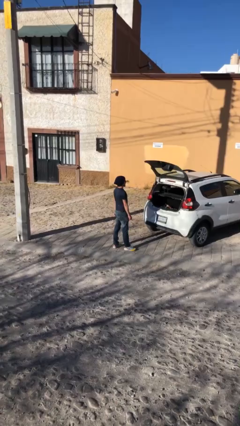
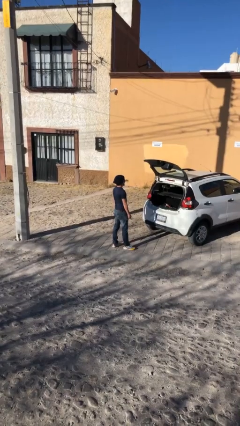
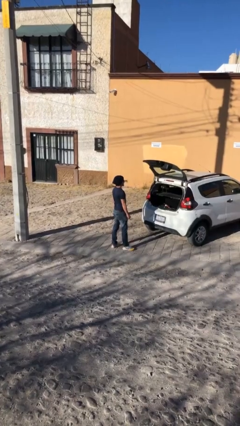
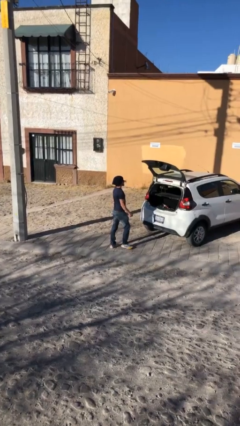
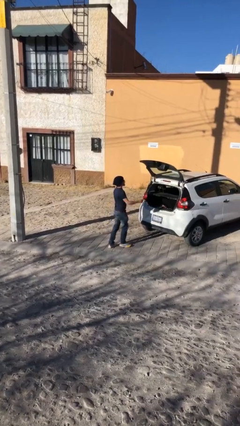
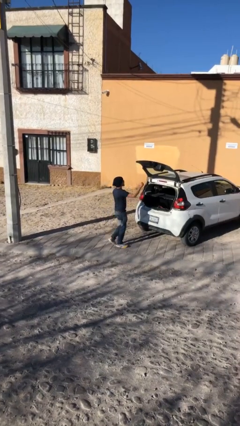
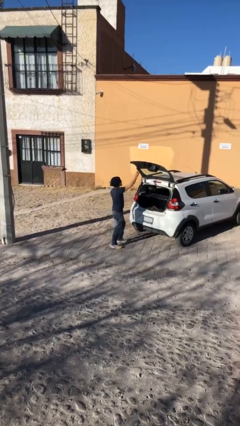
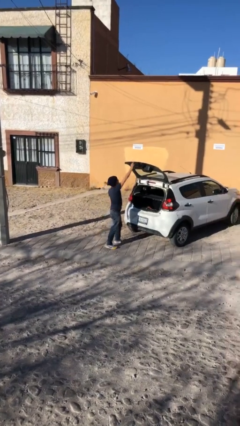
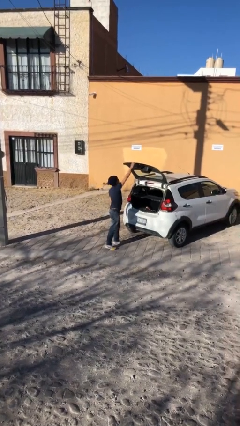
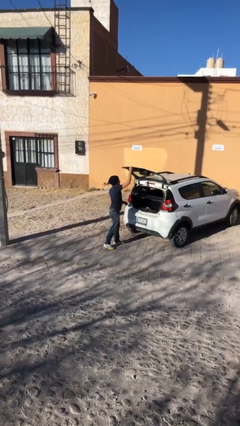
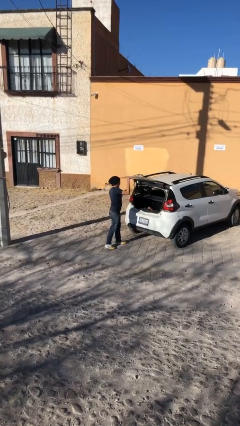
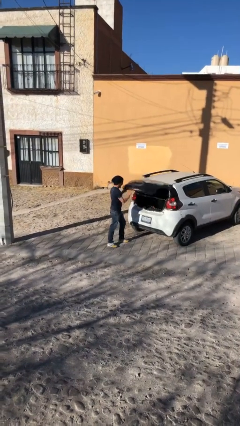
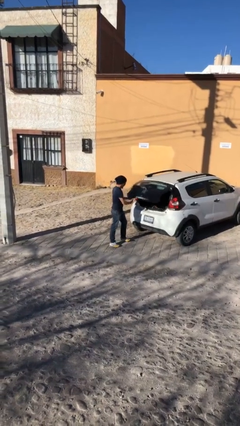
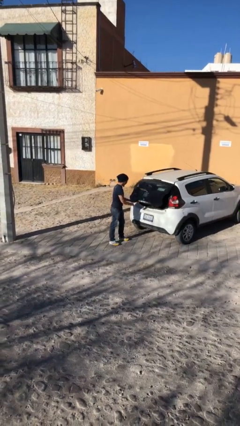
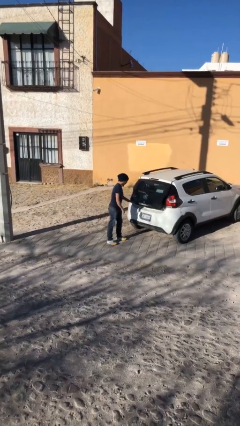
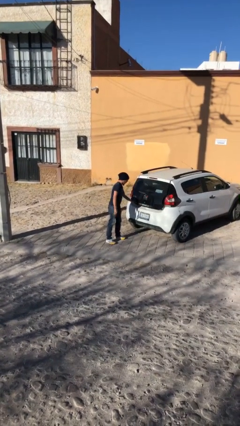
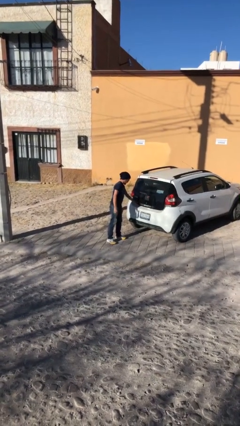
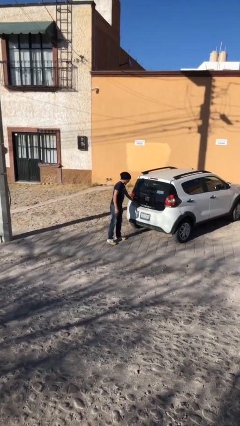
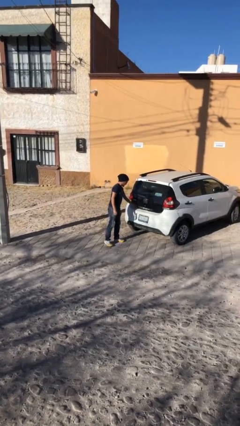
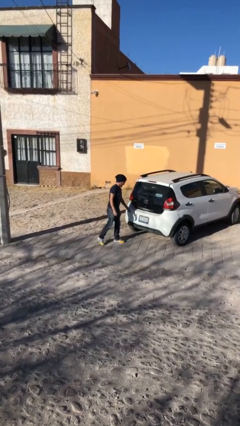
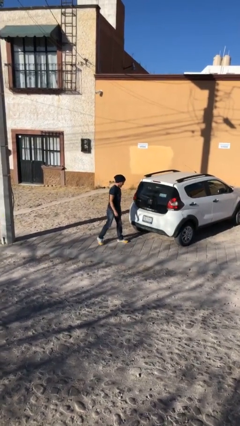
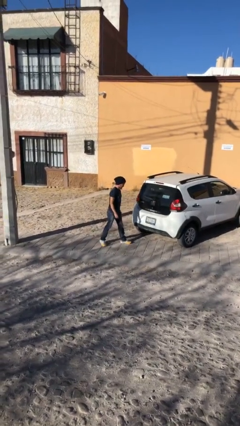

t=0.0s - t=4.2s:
person closes car trunk

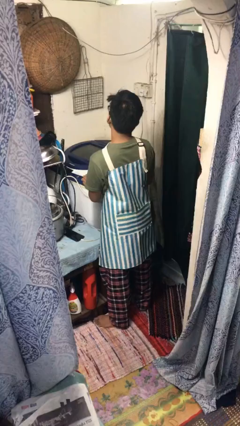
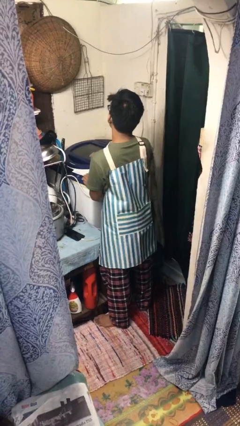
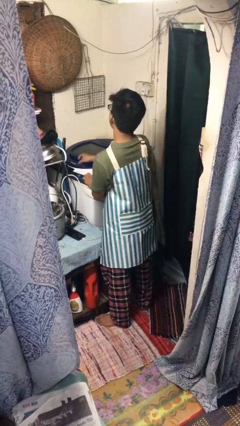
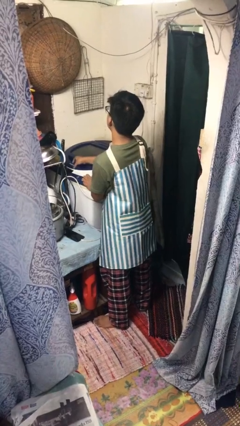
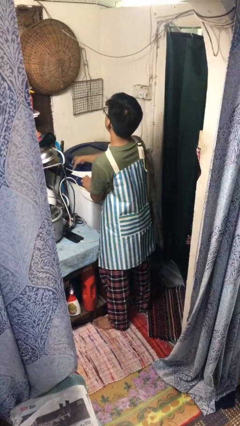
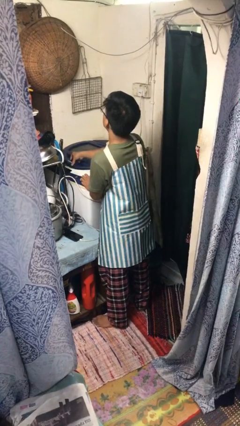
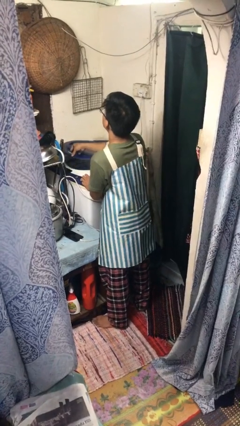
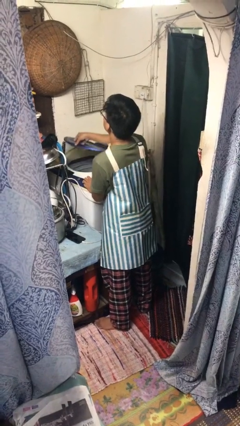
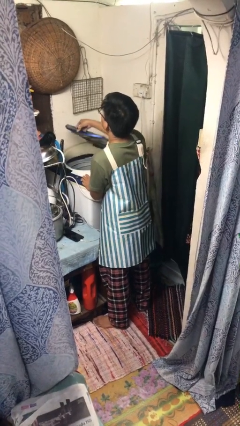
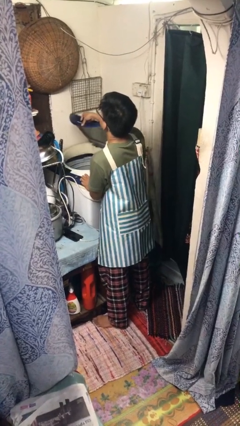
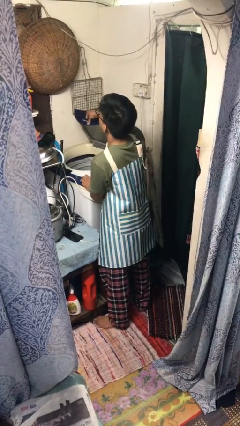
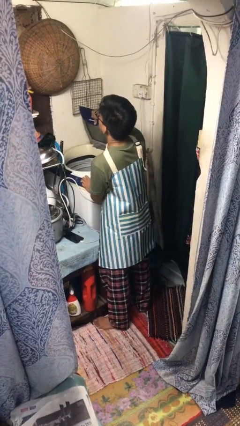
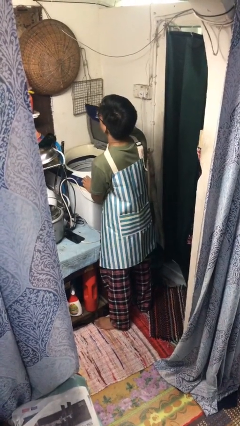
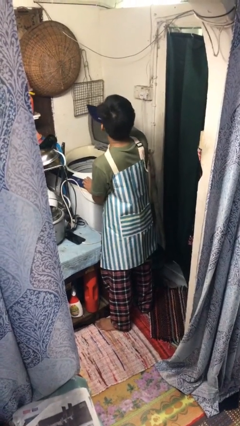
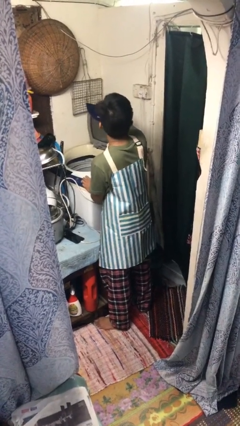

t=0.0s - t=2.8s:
person opens clothes washer

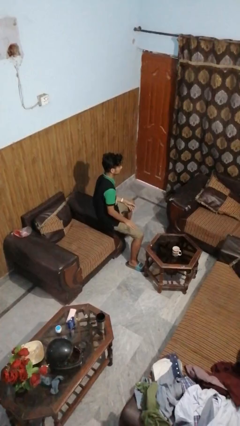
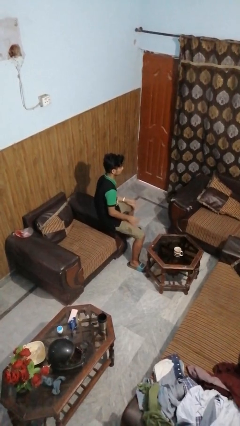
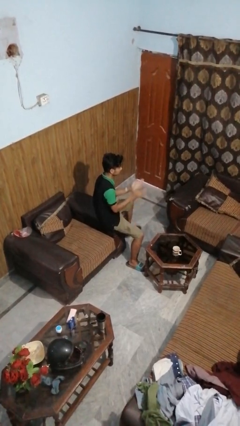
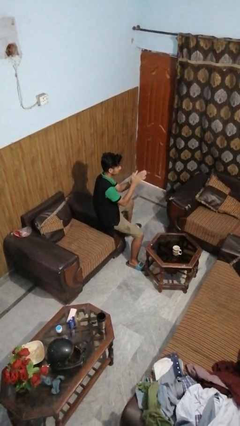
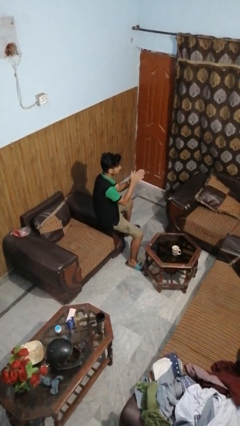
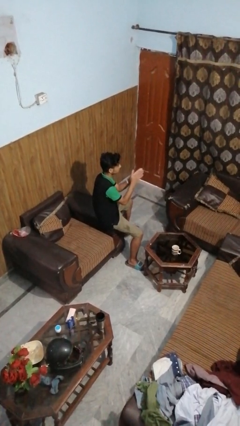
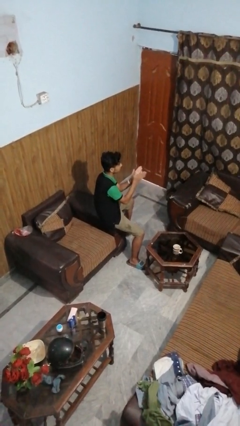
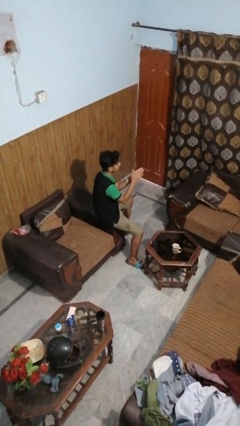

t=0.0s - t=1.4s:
person claps hands

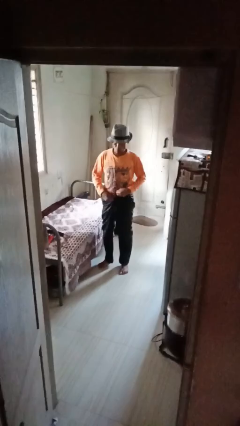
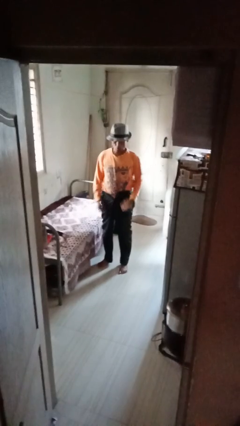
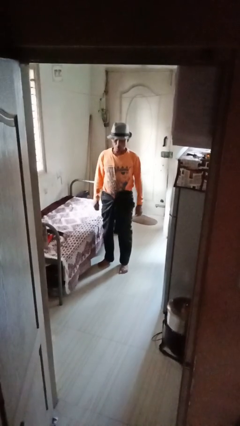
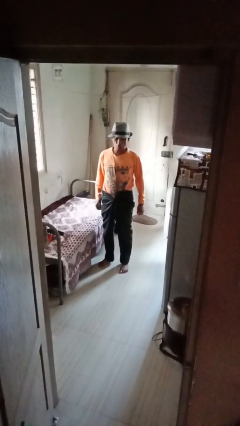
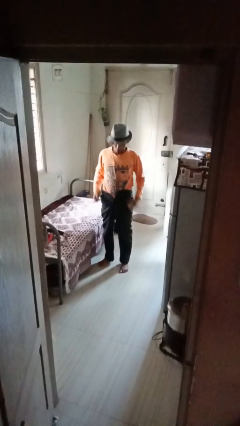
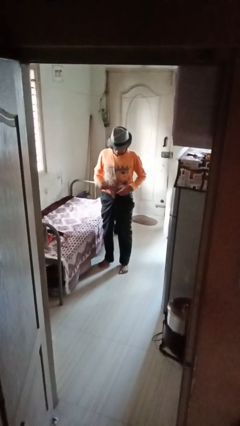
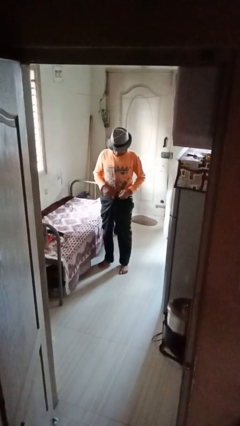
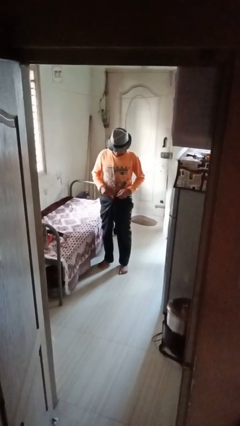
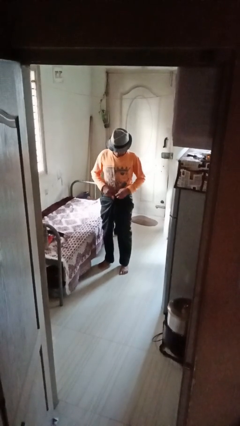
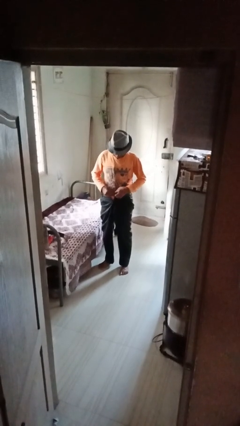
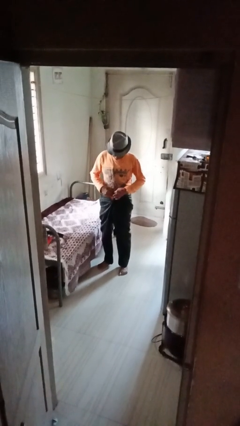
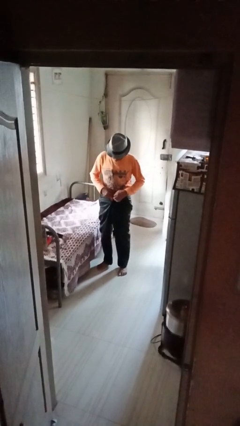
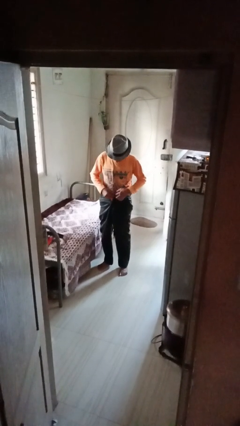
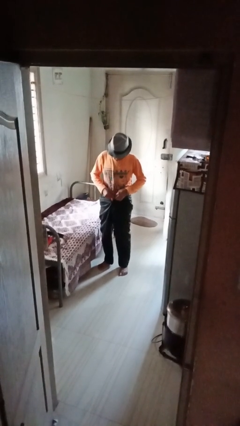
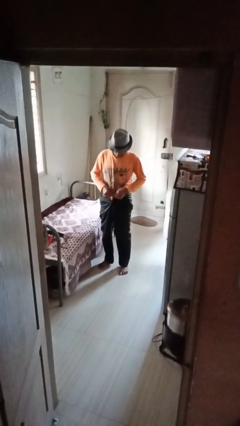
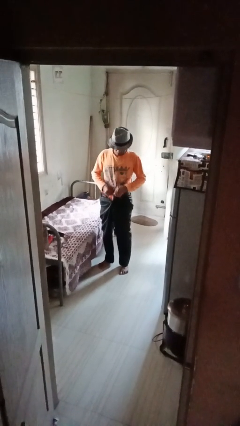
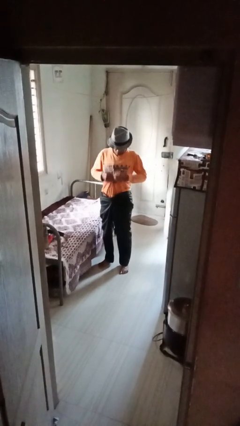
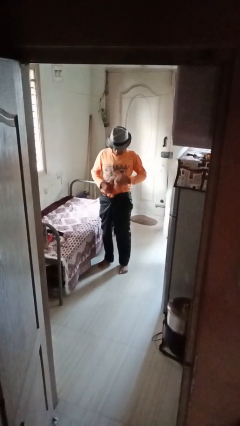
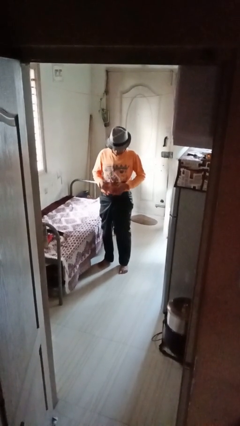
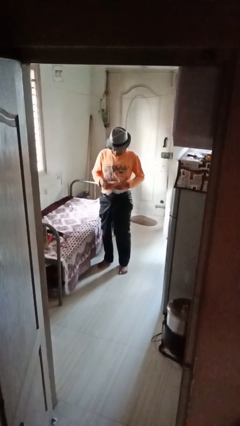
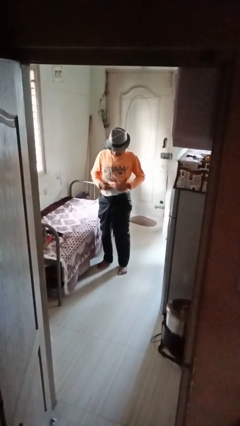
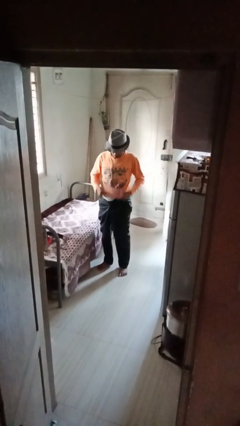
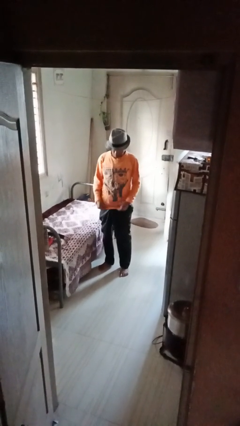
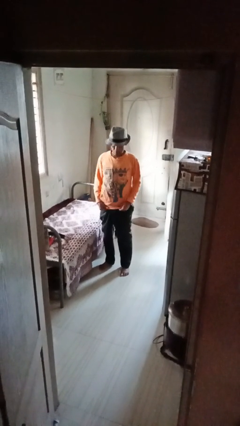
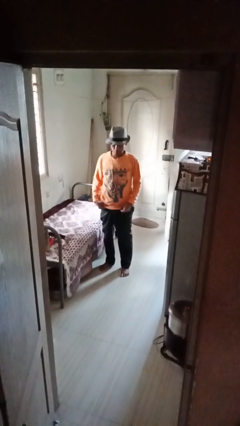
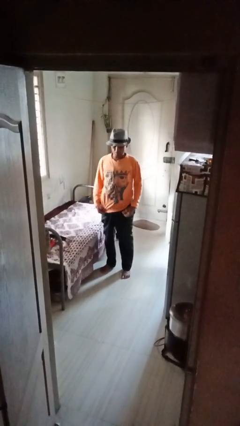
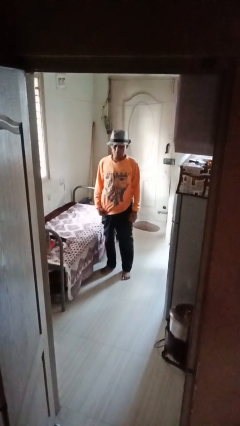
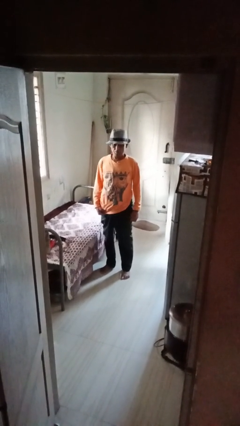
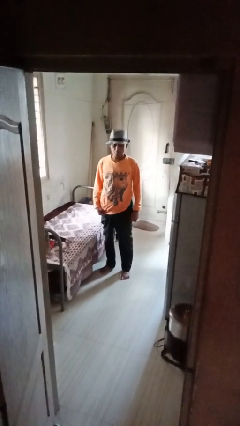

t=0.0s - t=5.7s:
person untucks shirt

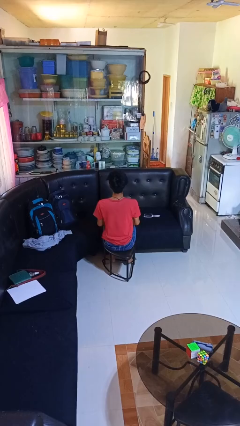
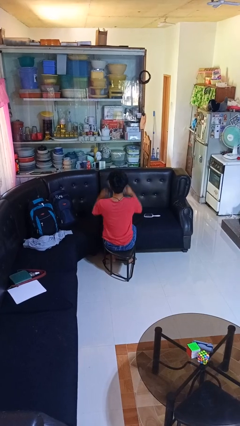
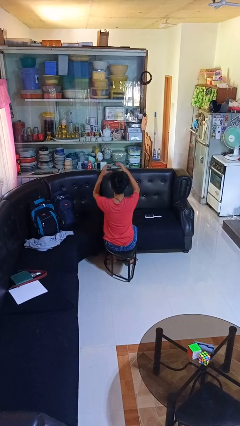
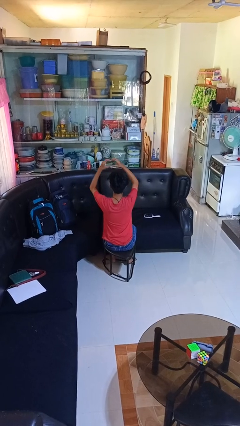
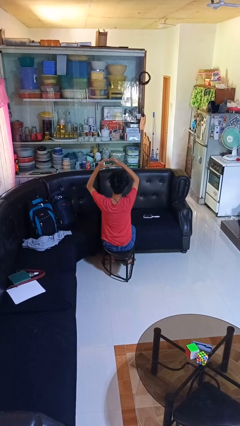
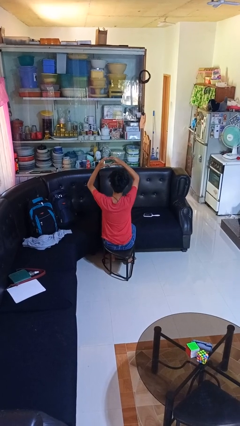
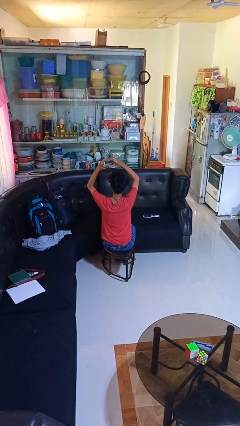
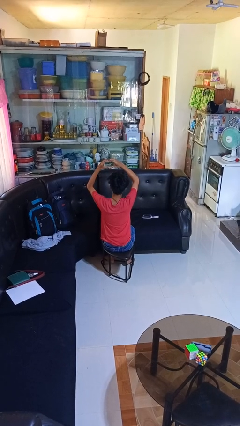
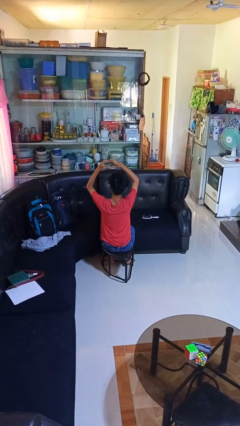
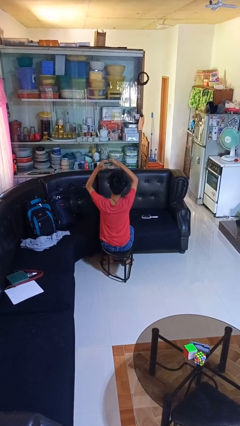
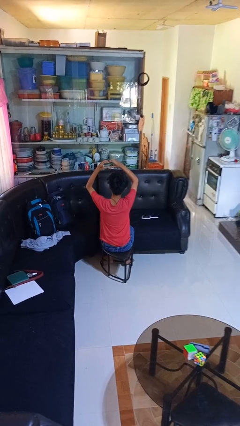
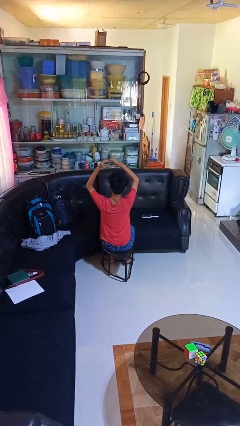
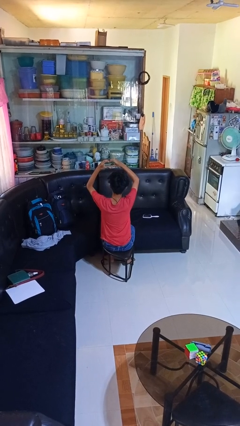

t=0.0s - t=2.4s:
person gestures heart

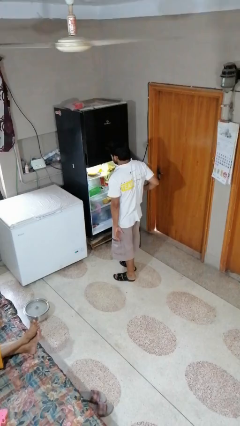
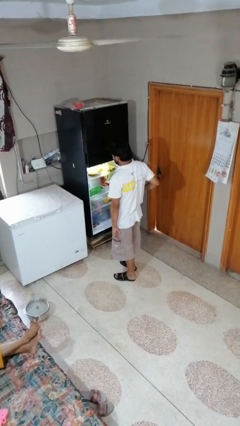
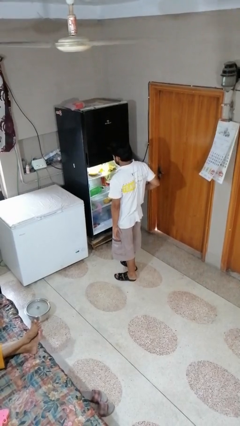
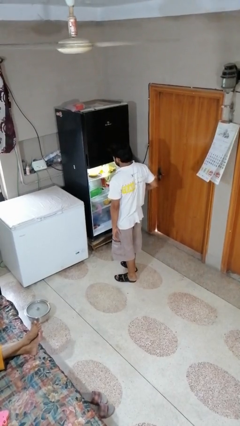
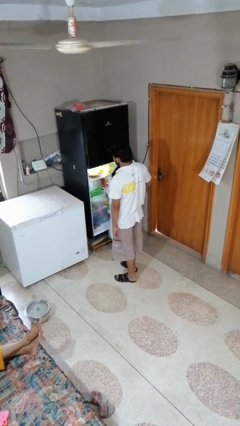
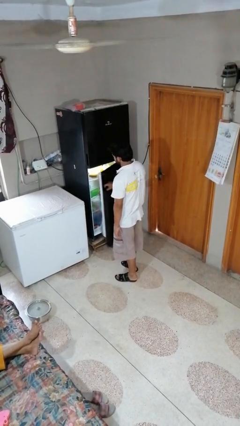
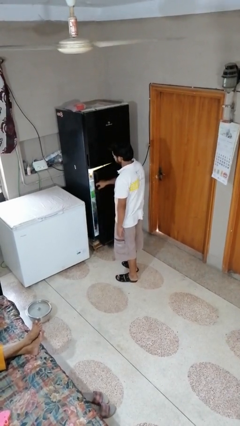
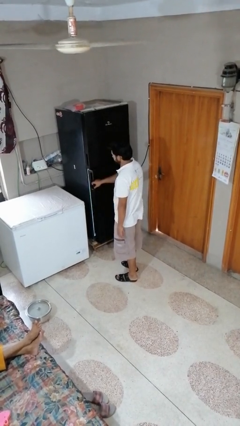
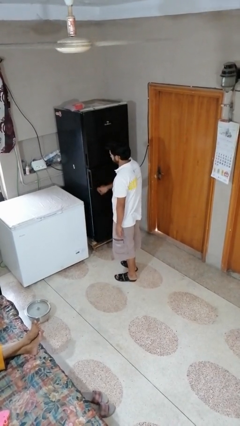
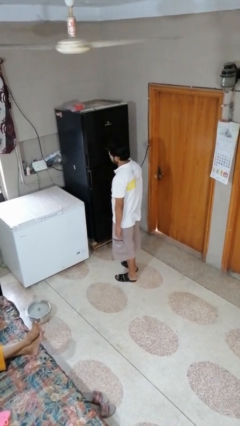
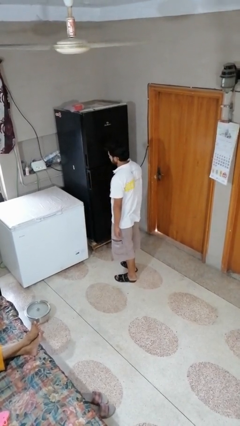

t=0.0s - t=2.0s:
person closes refrigerator
